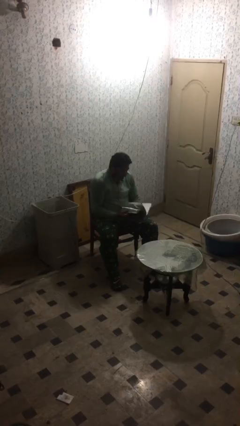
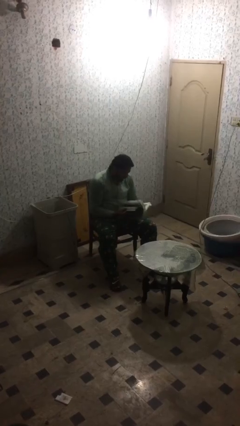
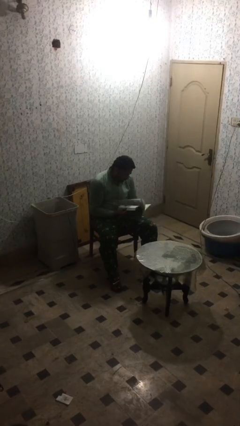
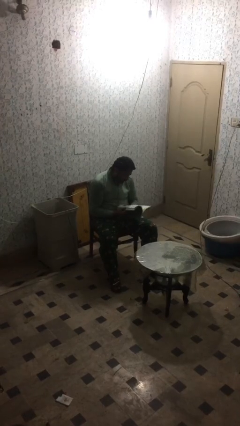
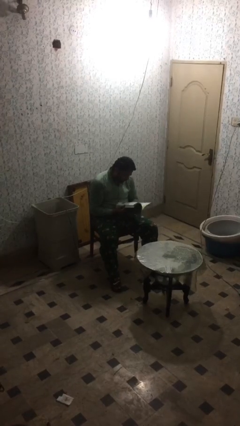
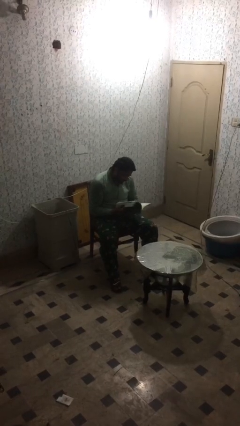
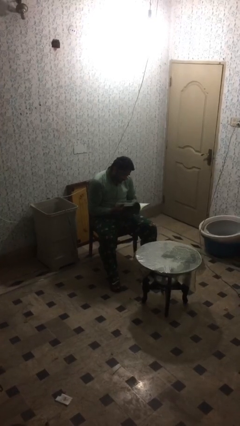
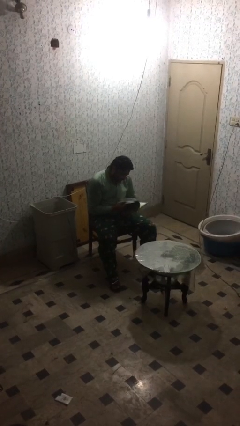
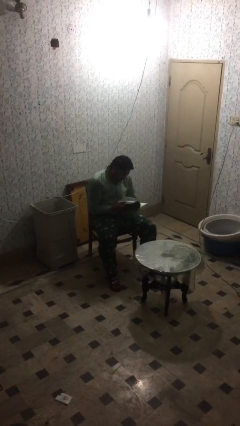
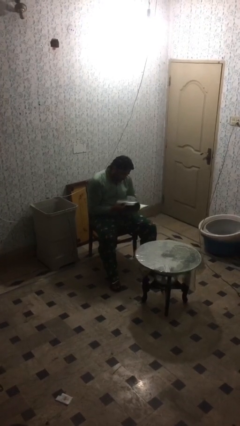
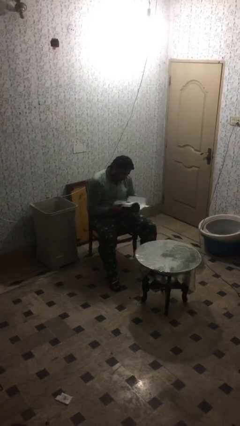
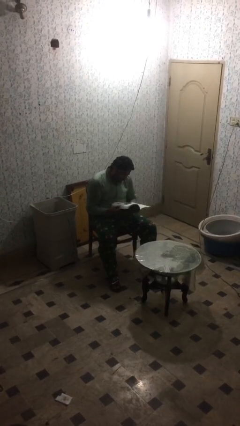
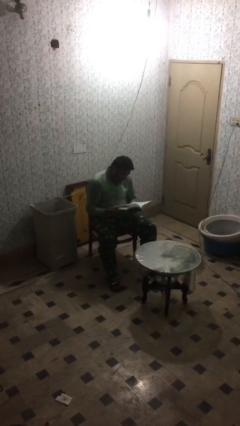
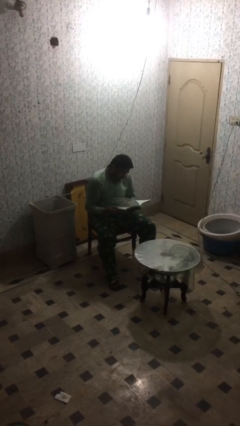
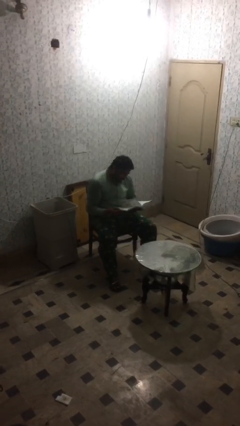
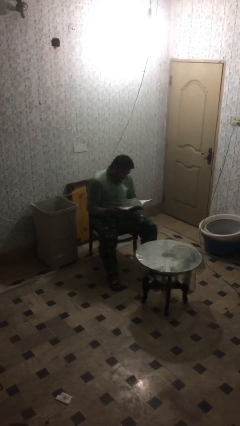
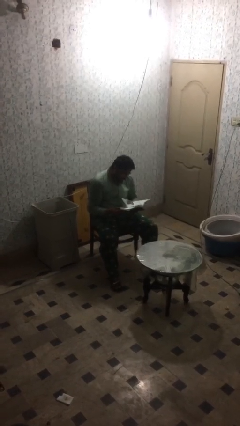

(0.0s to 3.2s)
person reads document

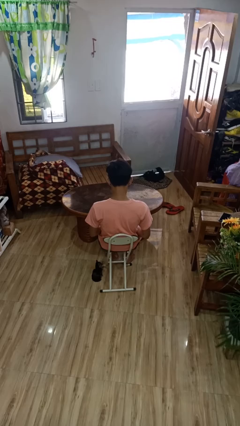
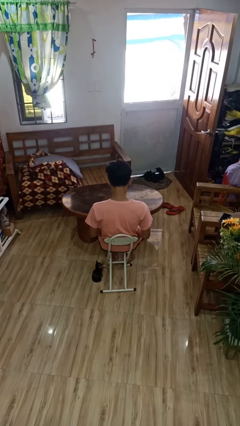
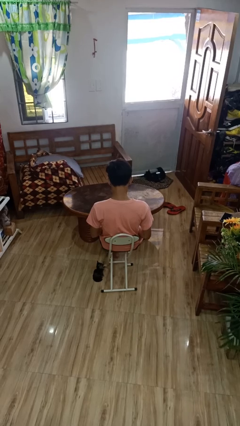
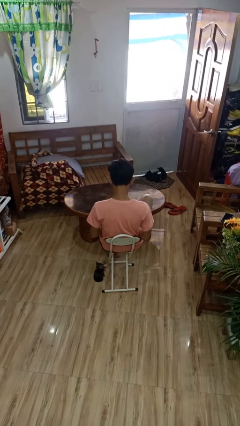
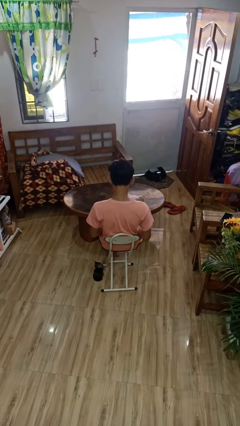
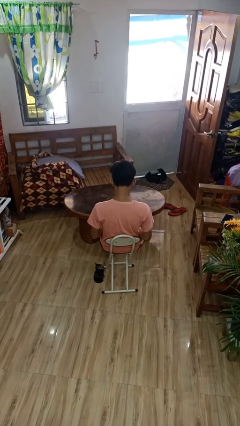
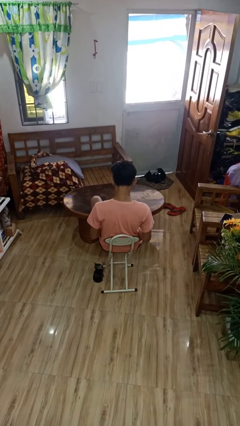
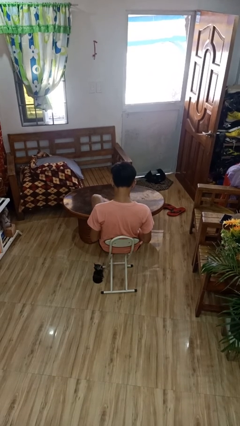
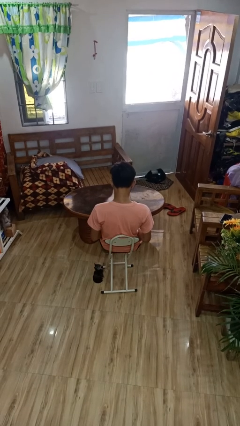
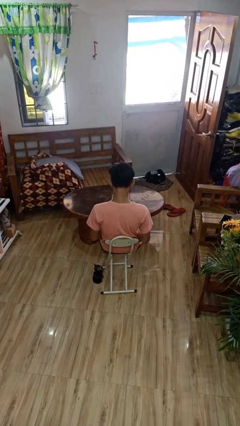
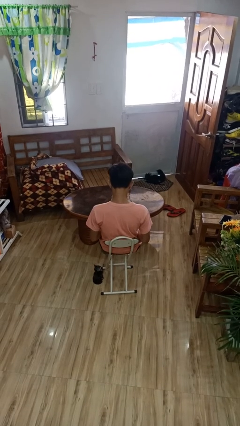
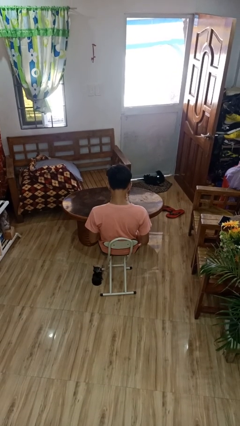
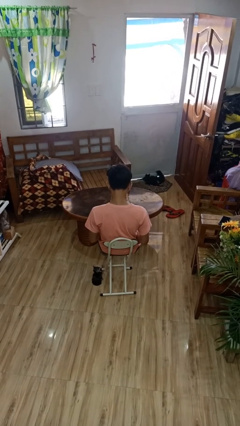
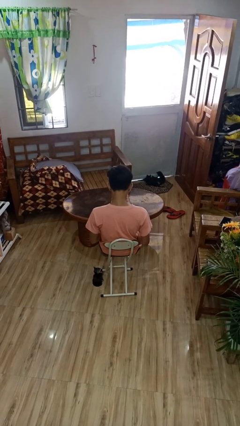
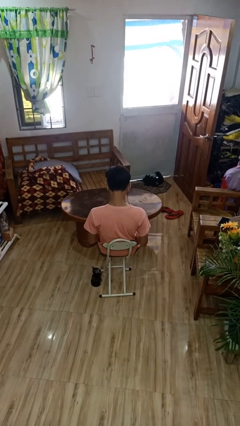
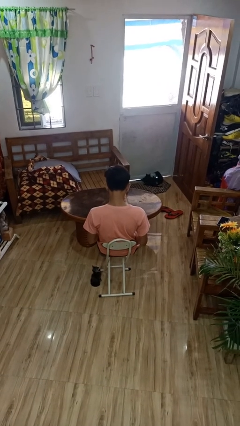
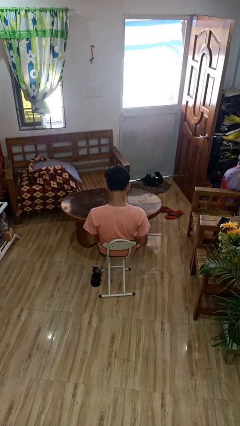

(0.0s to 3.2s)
person puts feet up

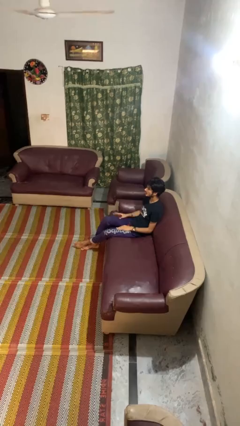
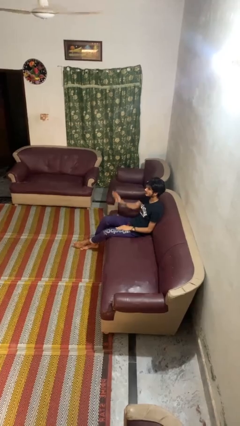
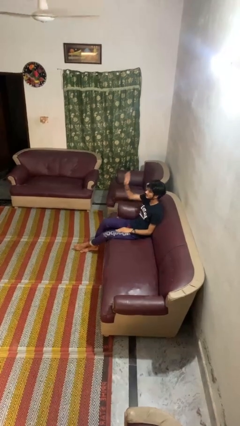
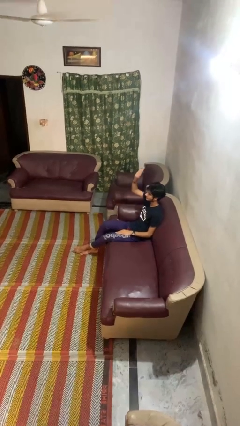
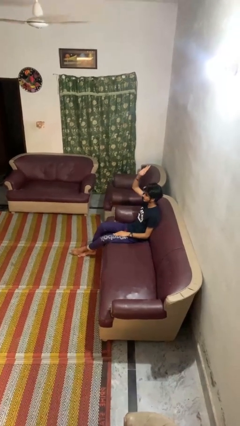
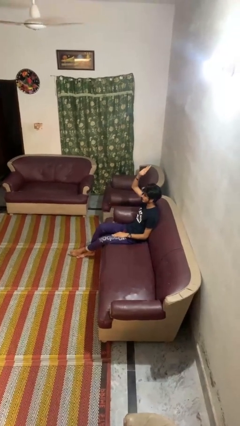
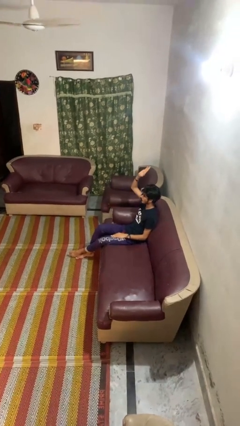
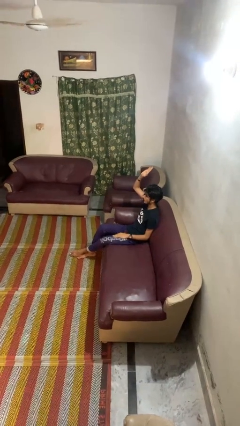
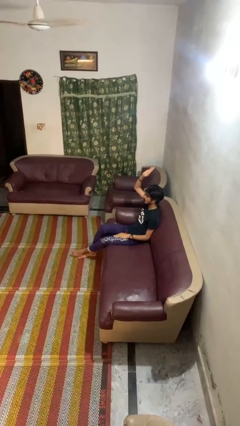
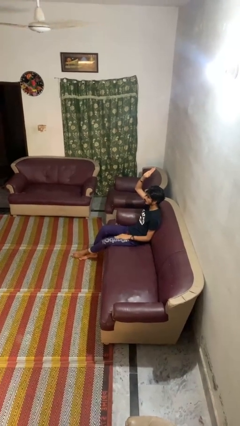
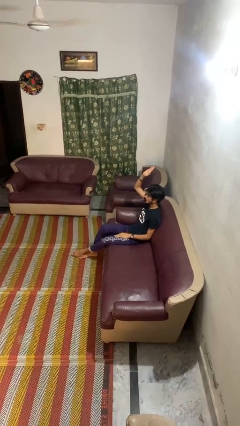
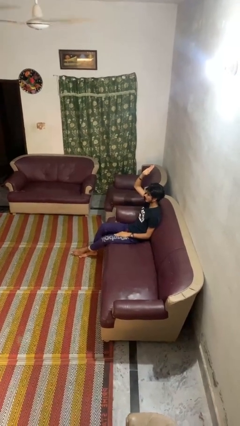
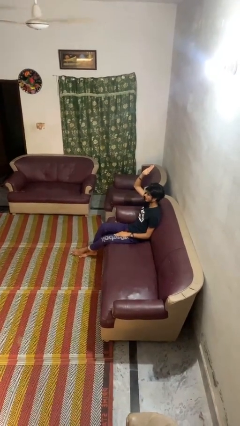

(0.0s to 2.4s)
person gestures raise hand

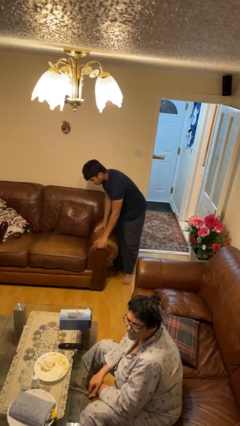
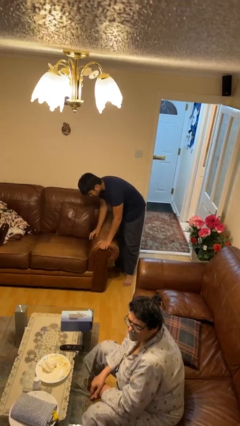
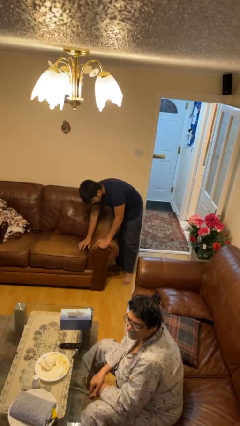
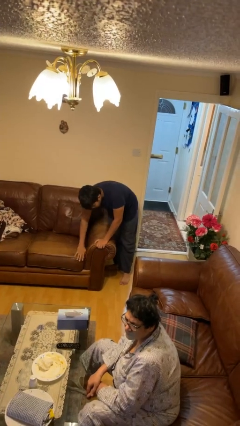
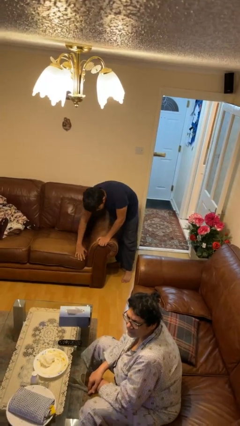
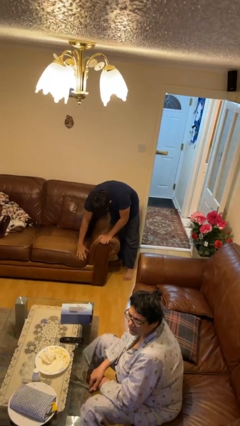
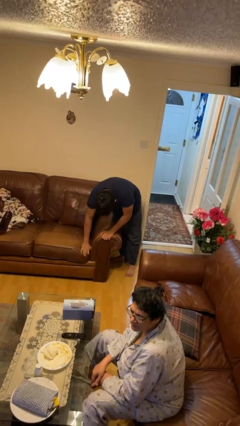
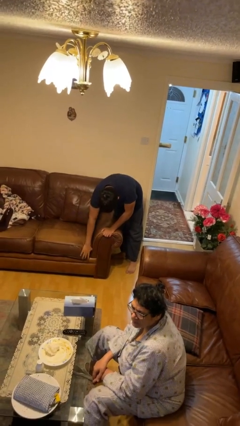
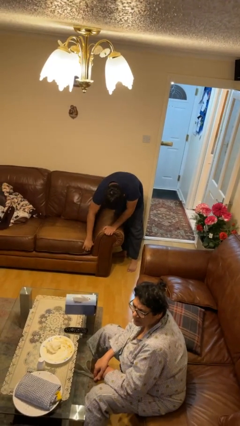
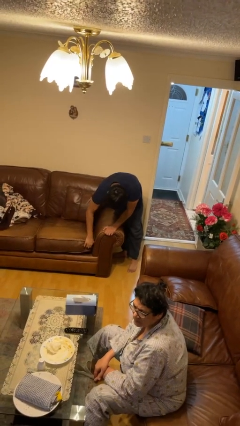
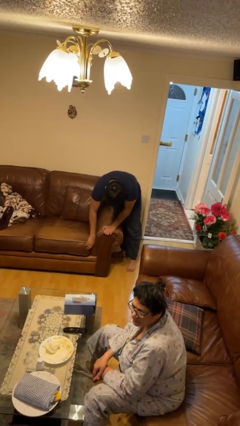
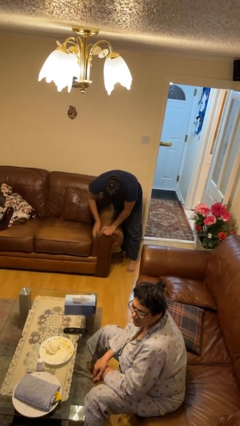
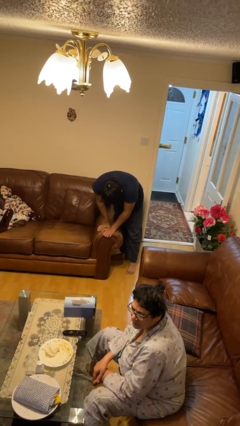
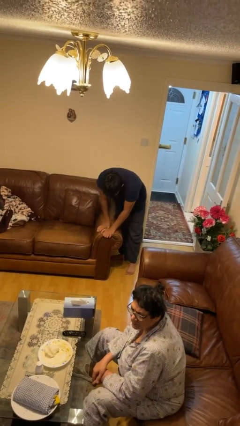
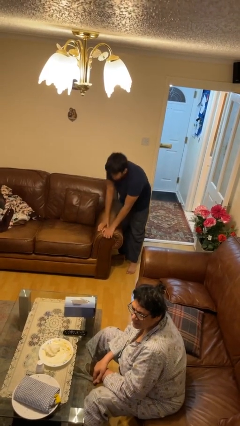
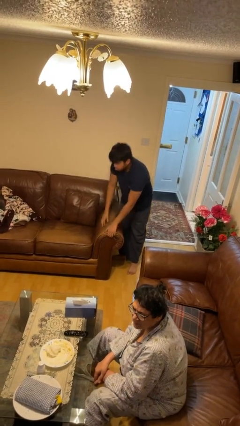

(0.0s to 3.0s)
person searches in couch

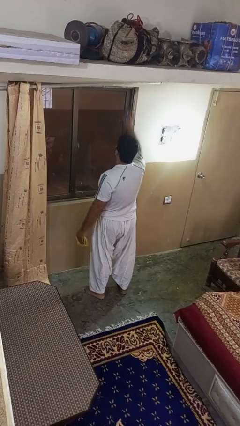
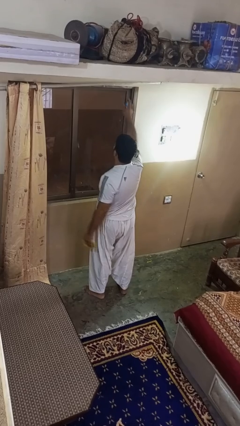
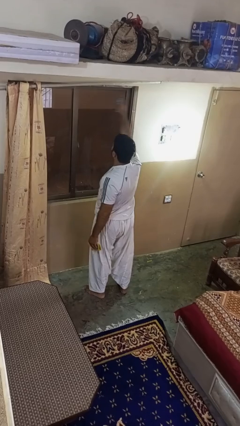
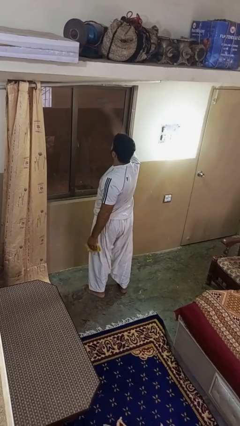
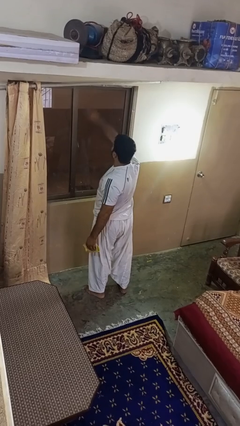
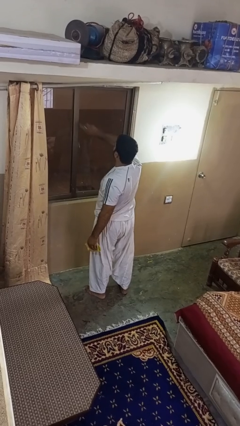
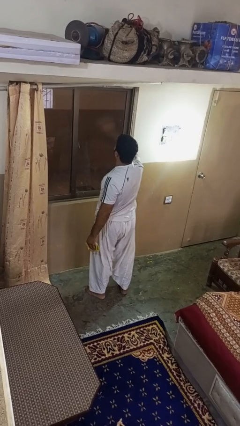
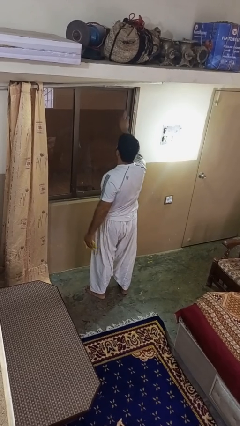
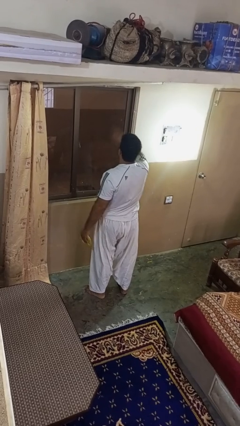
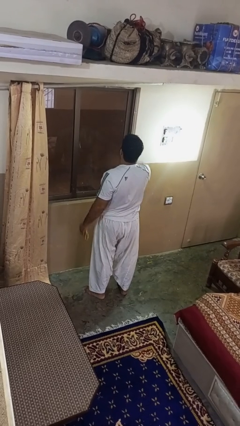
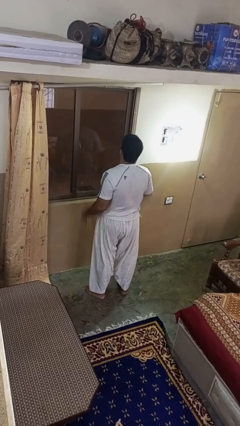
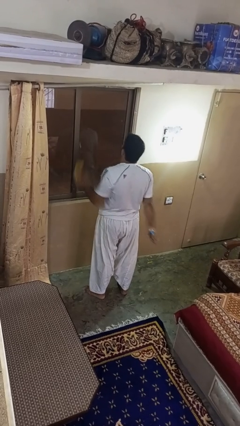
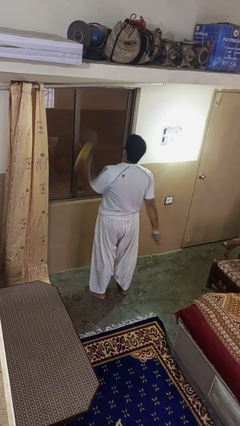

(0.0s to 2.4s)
person sprays from bottle

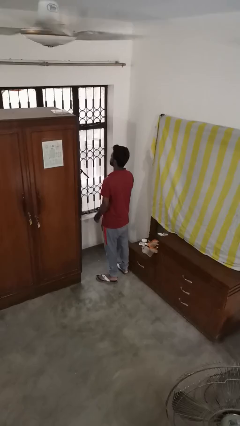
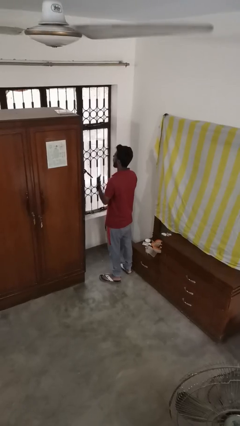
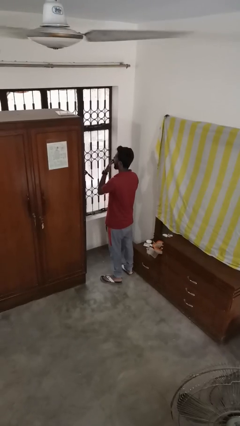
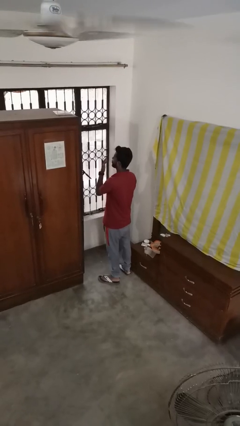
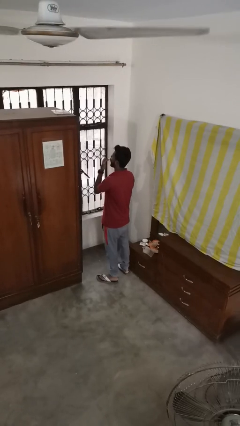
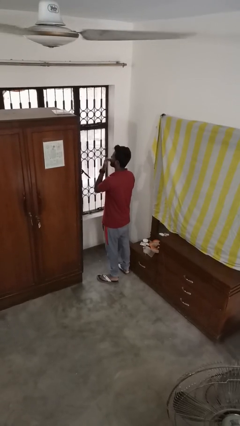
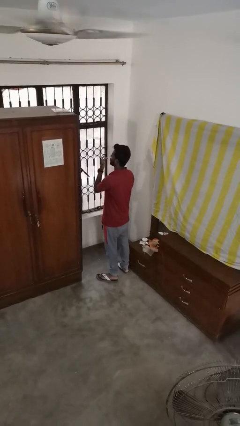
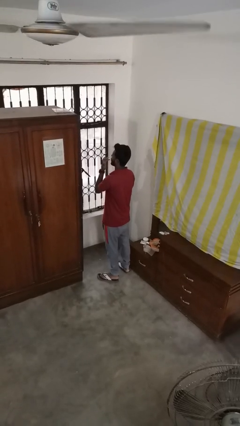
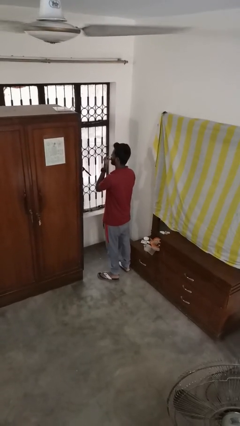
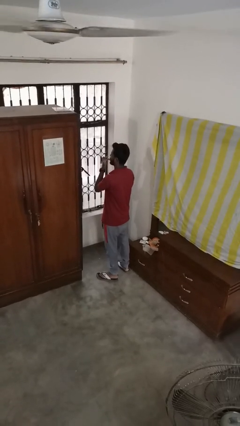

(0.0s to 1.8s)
person licks fingers

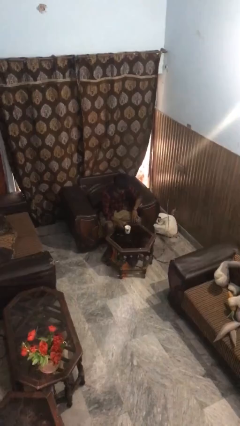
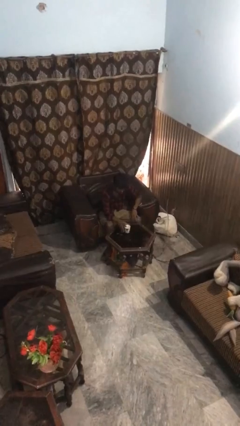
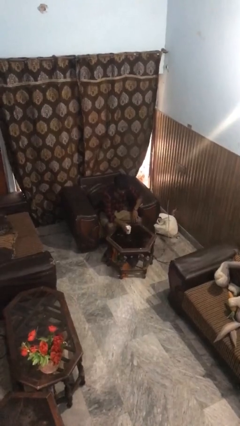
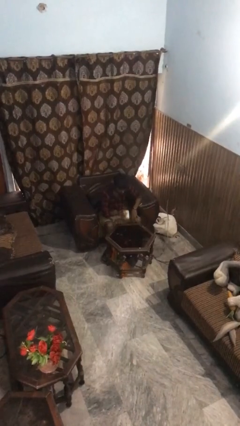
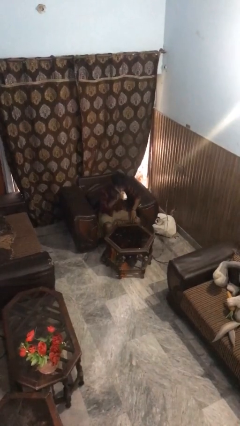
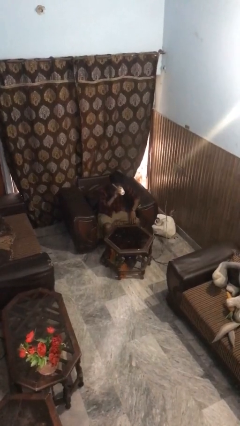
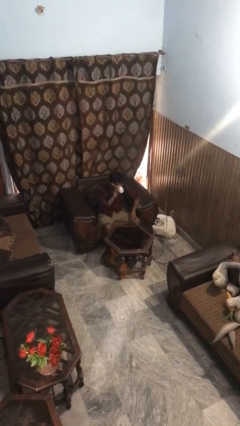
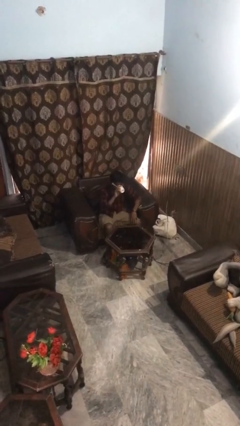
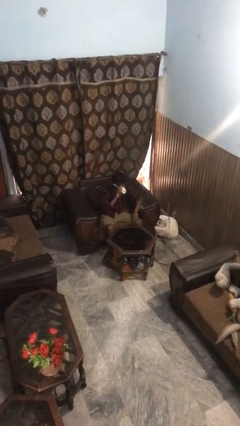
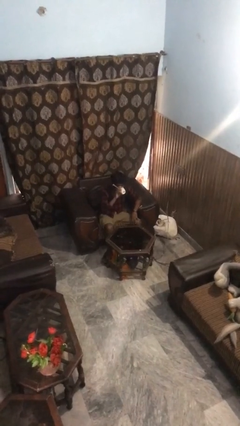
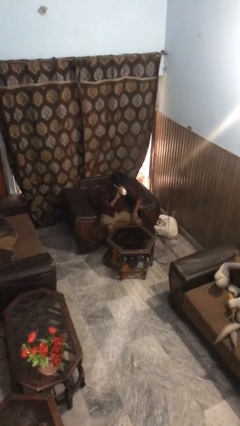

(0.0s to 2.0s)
person drinks from mug
